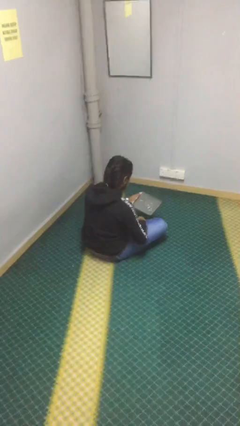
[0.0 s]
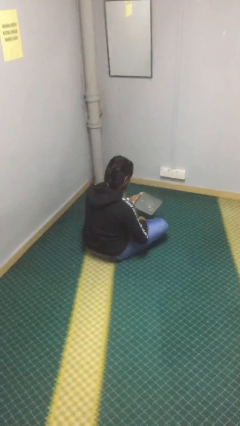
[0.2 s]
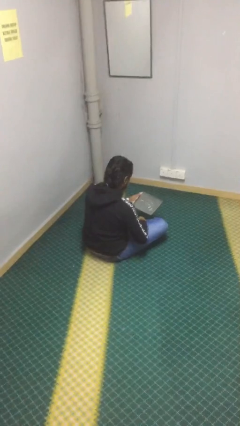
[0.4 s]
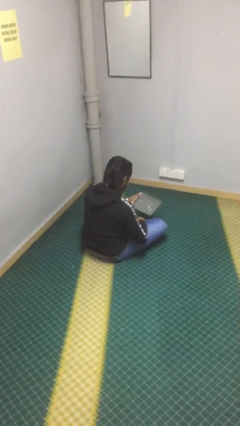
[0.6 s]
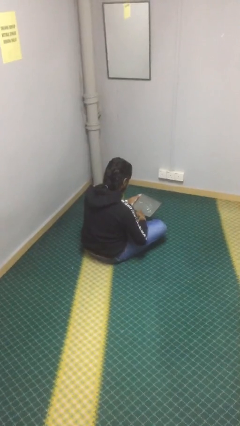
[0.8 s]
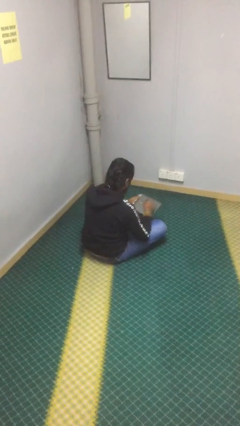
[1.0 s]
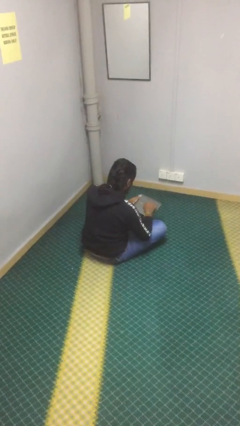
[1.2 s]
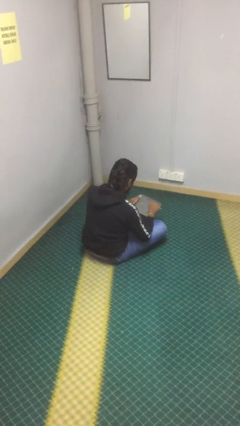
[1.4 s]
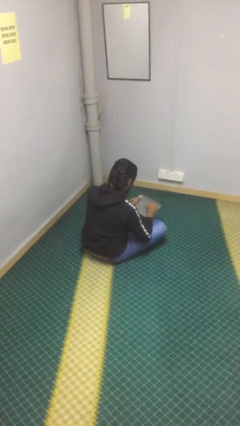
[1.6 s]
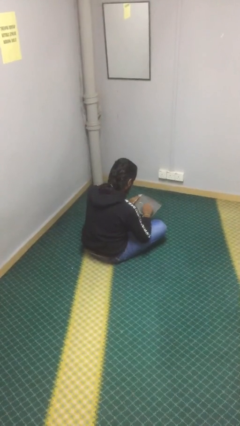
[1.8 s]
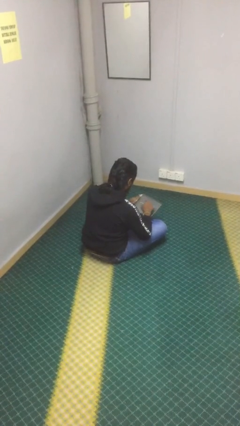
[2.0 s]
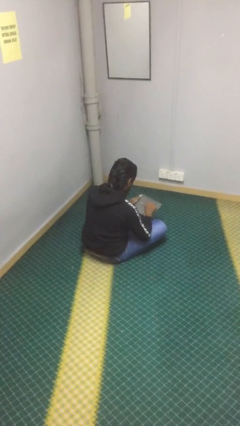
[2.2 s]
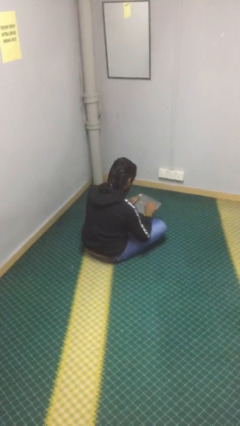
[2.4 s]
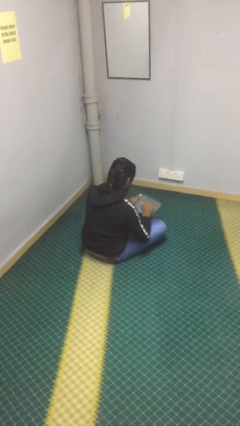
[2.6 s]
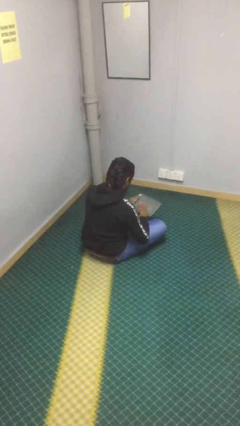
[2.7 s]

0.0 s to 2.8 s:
person interacts with tablet

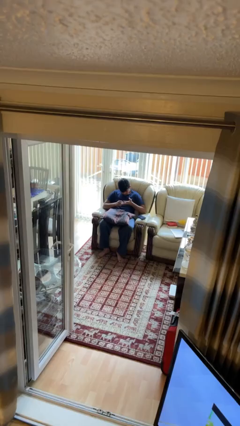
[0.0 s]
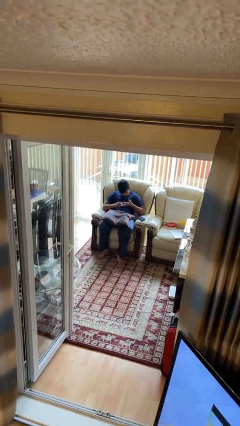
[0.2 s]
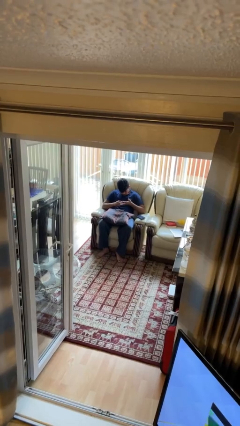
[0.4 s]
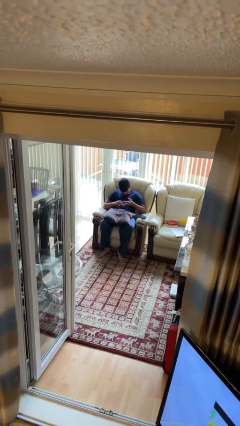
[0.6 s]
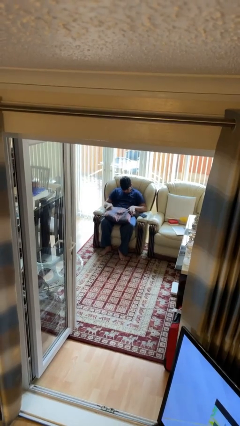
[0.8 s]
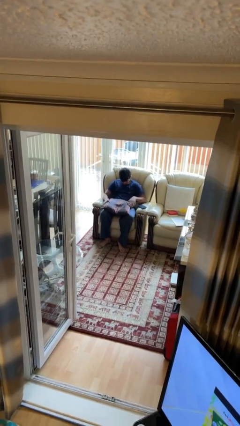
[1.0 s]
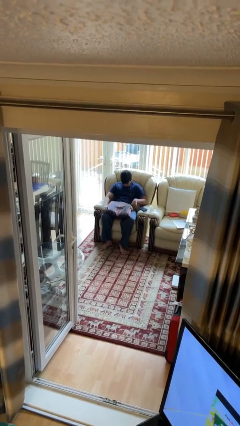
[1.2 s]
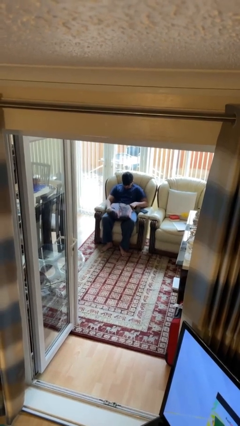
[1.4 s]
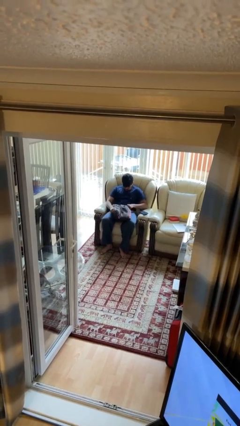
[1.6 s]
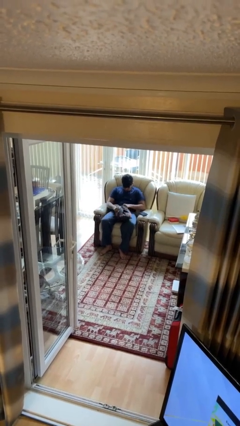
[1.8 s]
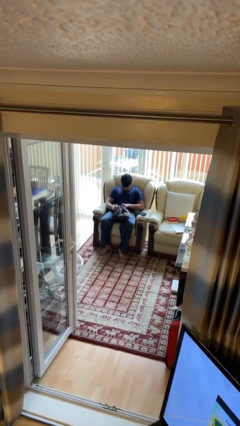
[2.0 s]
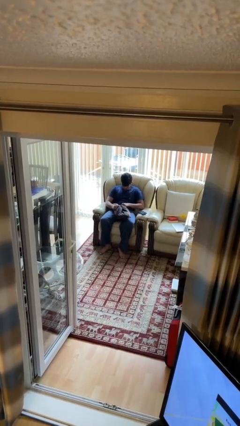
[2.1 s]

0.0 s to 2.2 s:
person squeezes object

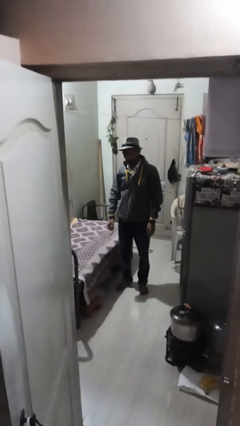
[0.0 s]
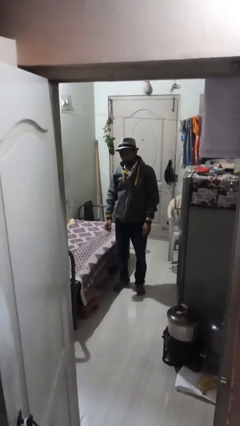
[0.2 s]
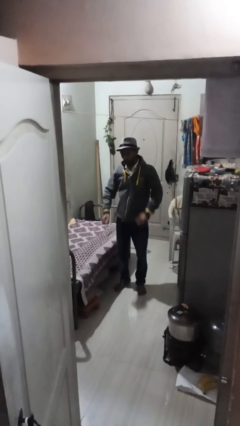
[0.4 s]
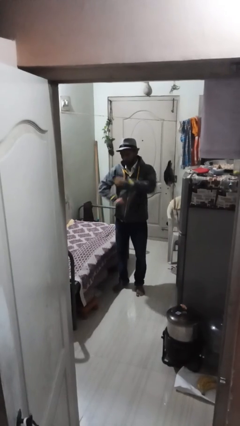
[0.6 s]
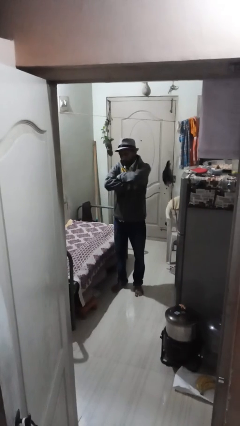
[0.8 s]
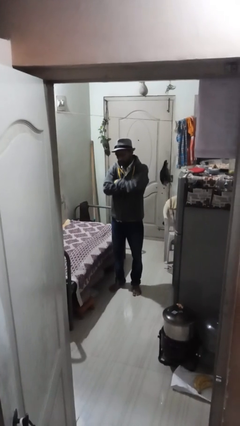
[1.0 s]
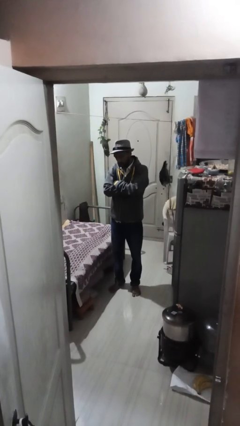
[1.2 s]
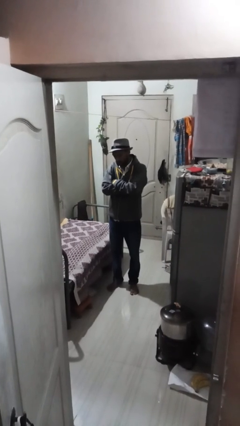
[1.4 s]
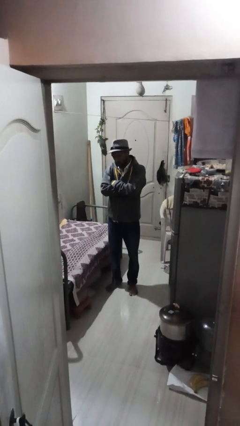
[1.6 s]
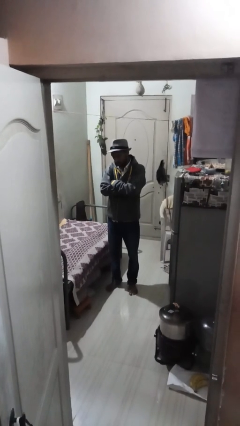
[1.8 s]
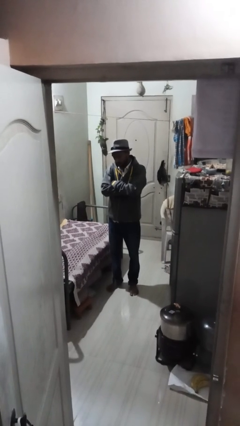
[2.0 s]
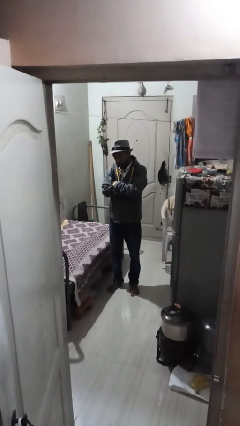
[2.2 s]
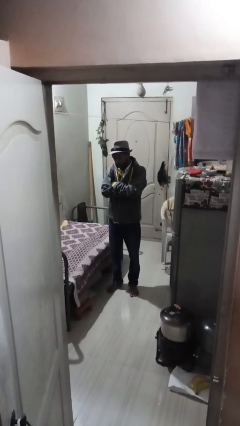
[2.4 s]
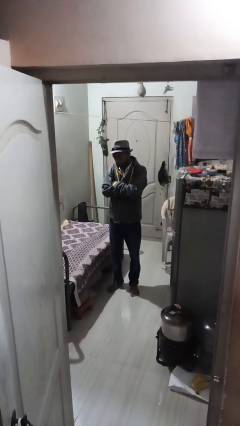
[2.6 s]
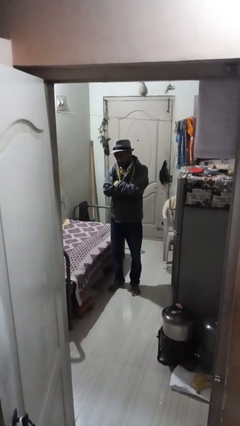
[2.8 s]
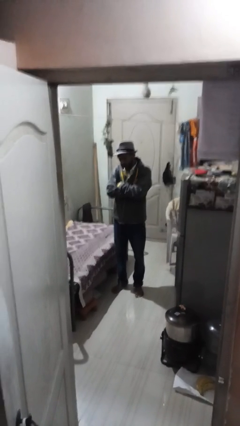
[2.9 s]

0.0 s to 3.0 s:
person crosses arms

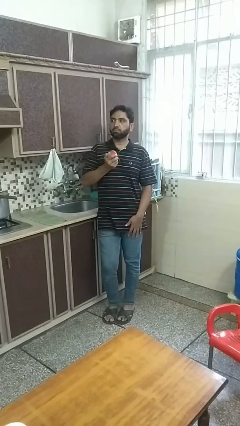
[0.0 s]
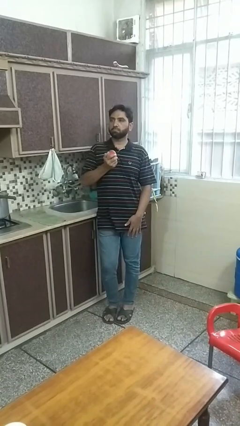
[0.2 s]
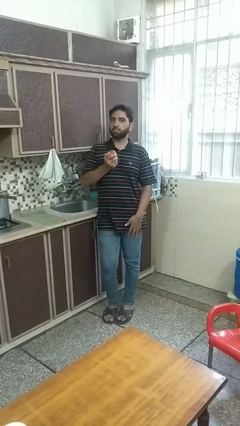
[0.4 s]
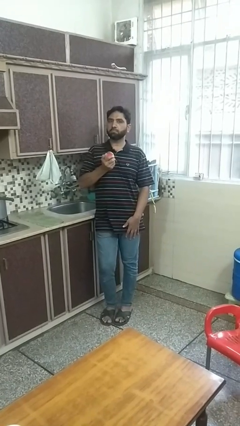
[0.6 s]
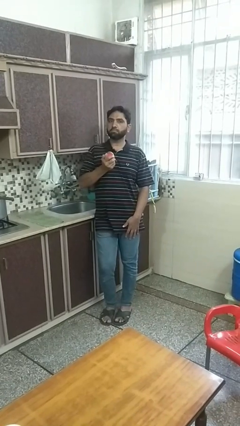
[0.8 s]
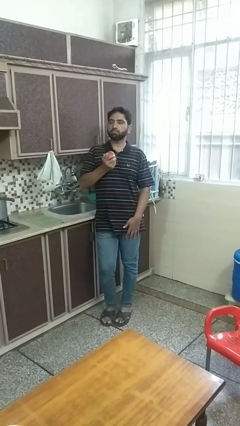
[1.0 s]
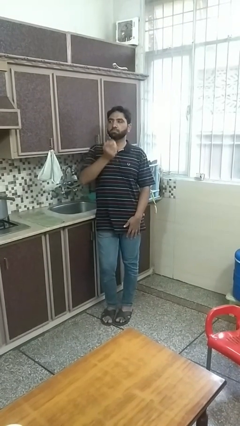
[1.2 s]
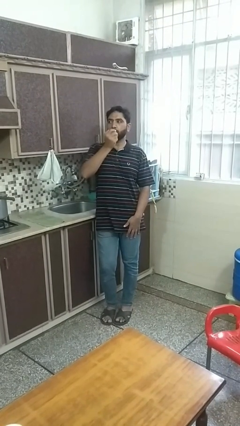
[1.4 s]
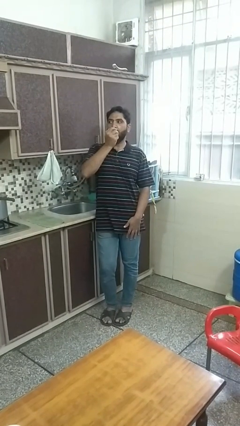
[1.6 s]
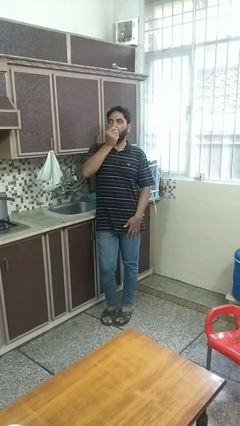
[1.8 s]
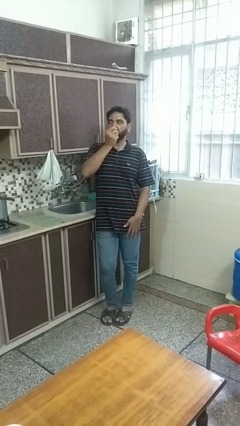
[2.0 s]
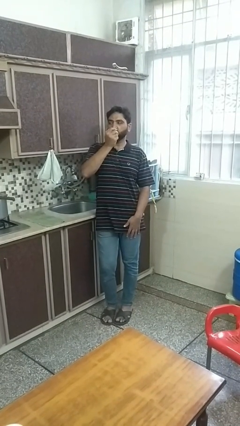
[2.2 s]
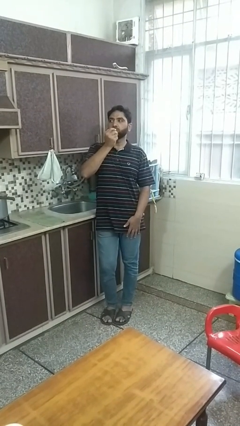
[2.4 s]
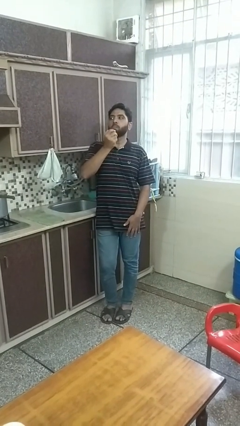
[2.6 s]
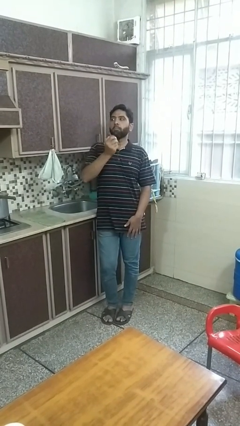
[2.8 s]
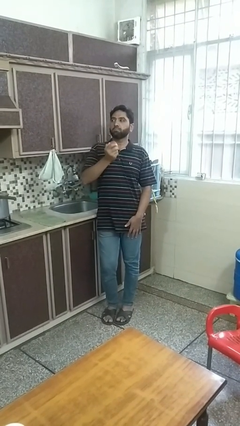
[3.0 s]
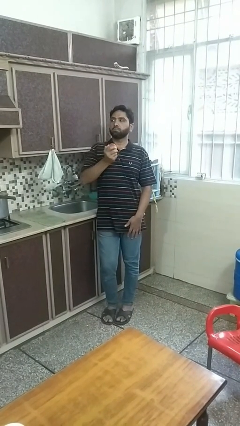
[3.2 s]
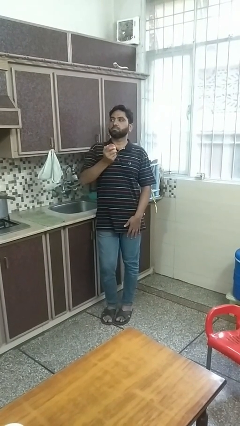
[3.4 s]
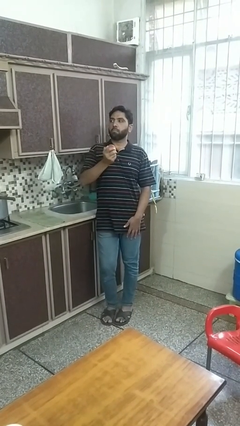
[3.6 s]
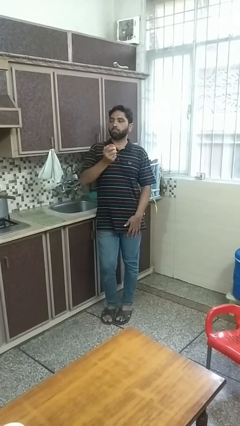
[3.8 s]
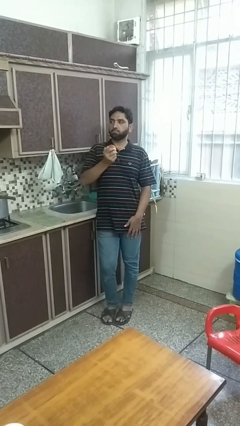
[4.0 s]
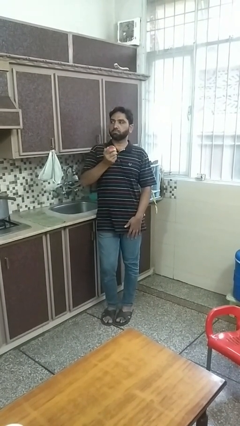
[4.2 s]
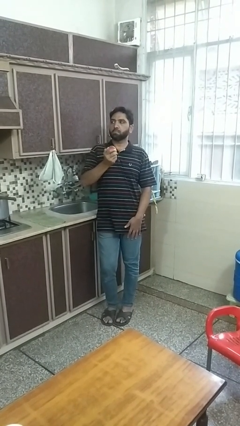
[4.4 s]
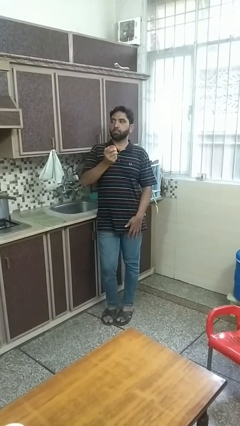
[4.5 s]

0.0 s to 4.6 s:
person eats apple

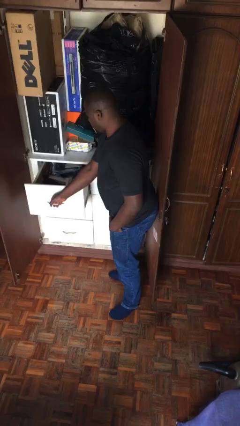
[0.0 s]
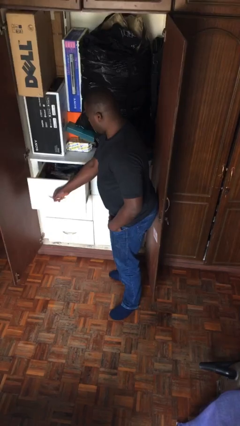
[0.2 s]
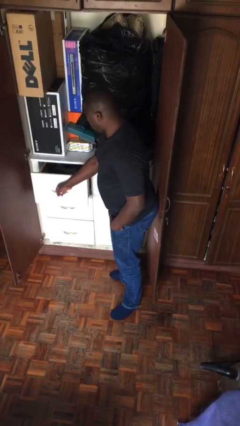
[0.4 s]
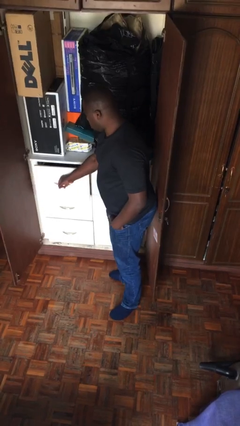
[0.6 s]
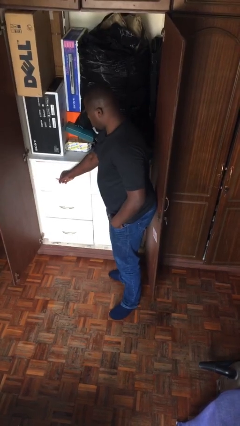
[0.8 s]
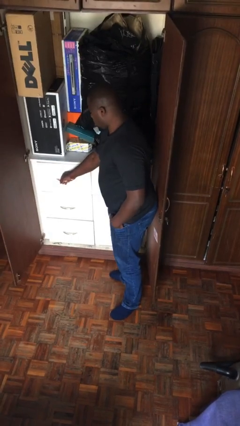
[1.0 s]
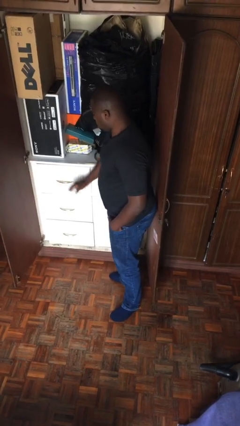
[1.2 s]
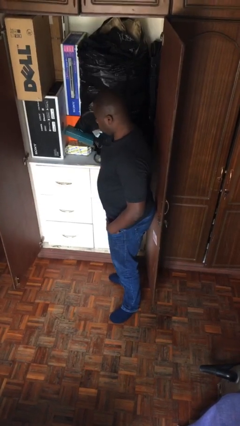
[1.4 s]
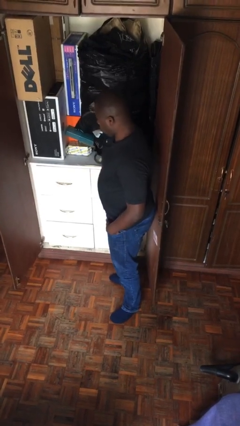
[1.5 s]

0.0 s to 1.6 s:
person closes dresser drawer

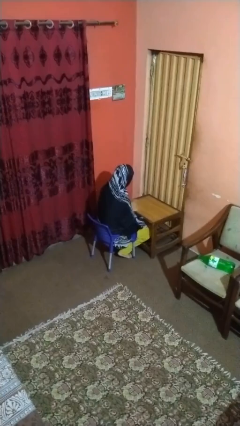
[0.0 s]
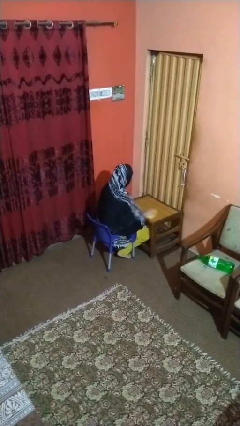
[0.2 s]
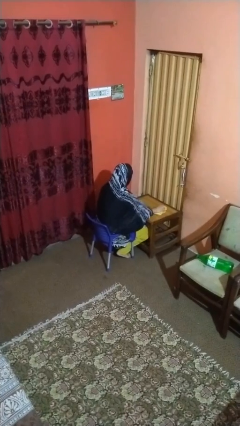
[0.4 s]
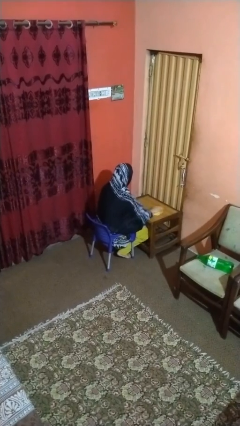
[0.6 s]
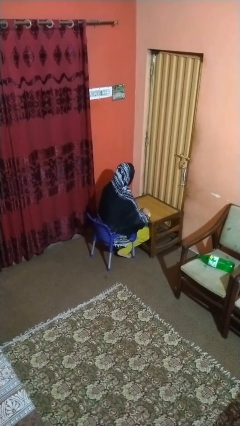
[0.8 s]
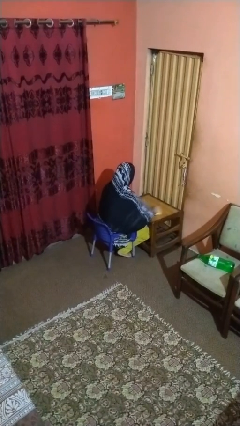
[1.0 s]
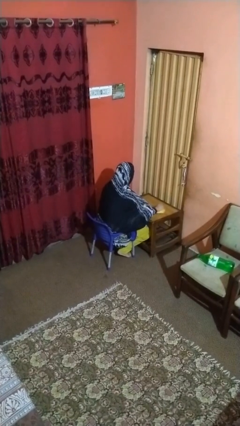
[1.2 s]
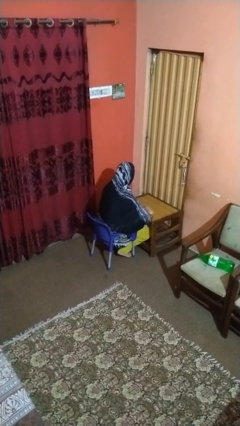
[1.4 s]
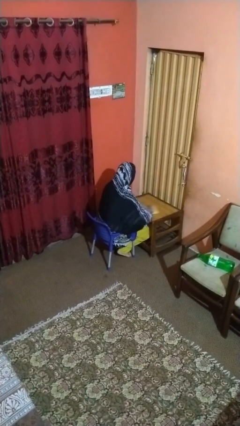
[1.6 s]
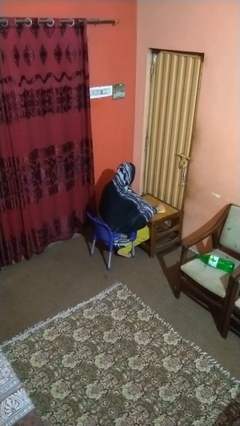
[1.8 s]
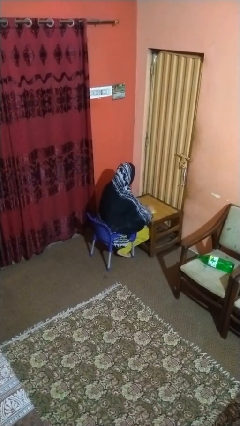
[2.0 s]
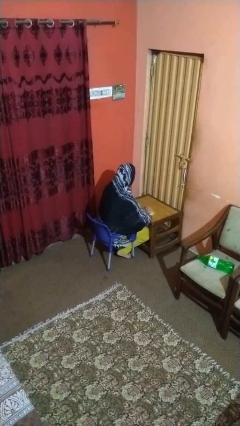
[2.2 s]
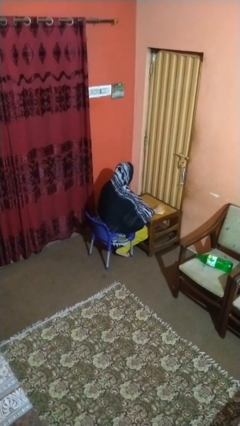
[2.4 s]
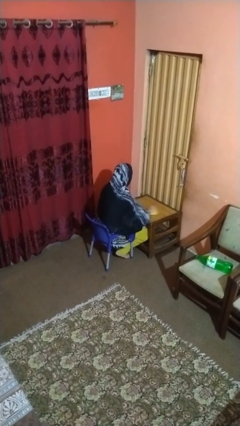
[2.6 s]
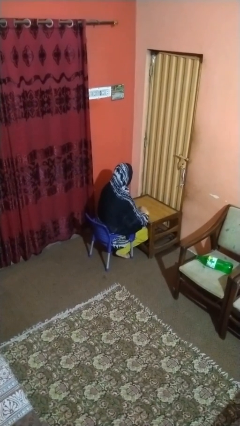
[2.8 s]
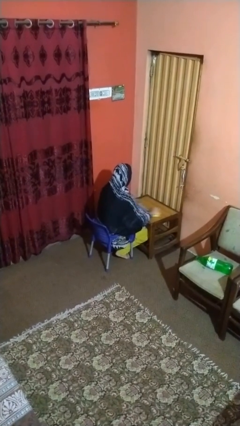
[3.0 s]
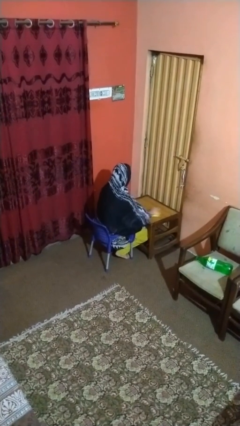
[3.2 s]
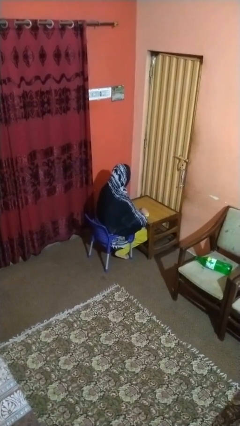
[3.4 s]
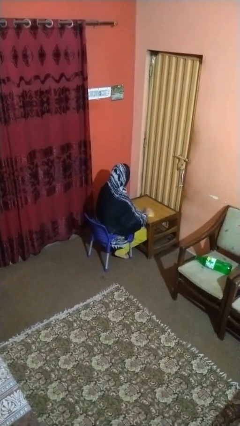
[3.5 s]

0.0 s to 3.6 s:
person cleans table with rag
